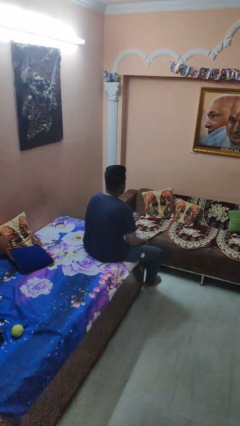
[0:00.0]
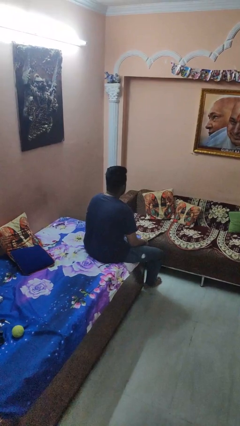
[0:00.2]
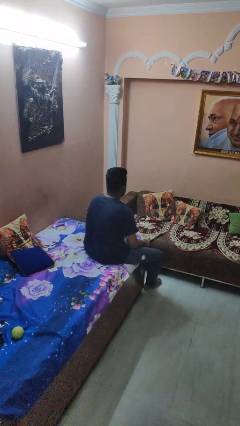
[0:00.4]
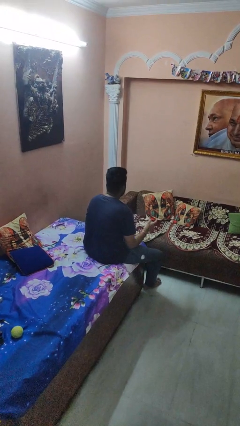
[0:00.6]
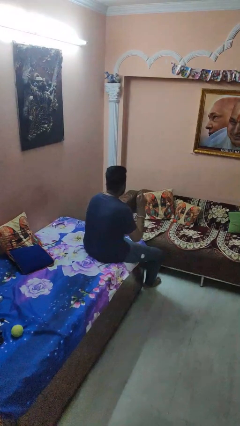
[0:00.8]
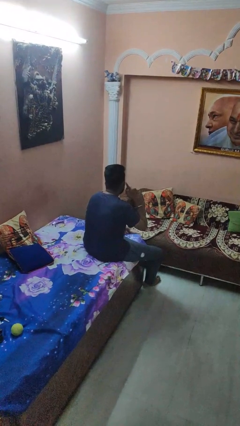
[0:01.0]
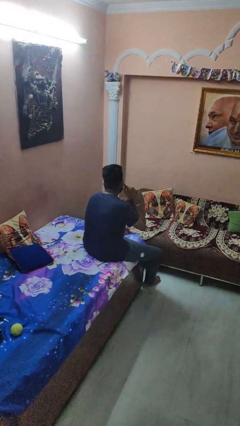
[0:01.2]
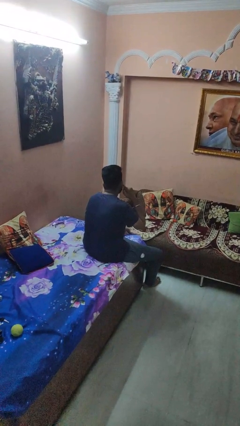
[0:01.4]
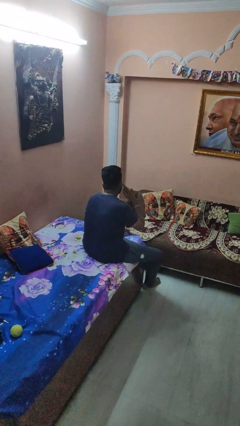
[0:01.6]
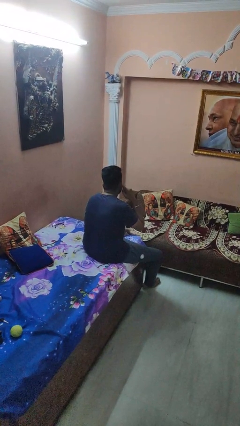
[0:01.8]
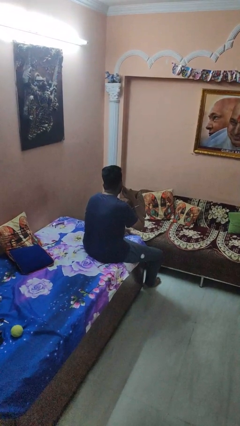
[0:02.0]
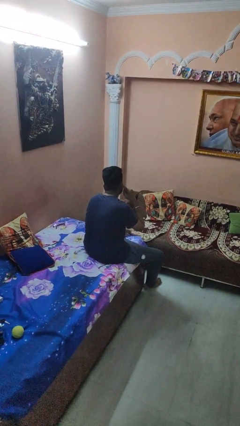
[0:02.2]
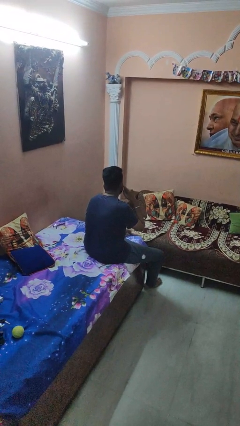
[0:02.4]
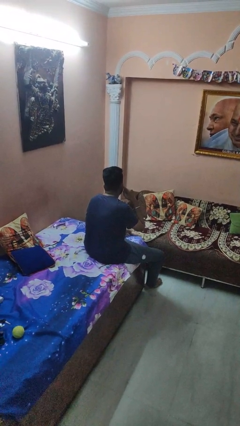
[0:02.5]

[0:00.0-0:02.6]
person gestures listen closely

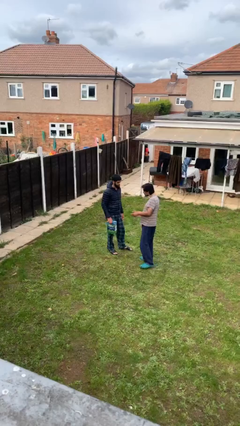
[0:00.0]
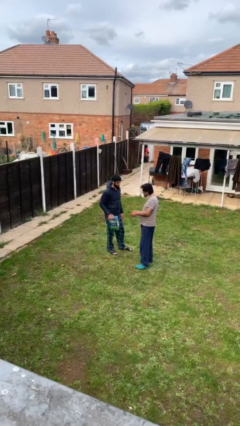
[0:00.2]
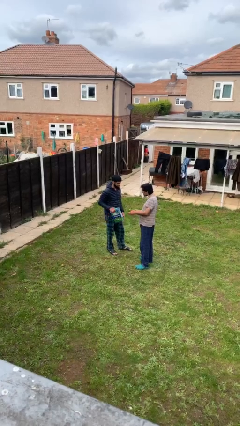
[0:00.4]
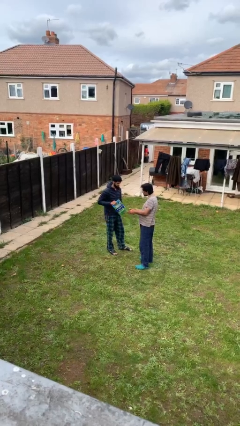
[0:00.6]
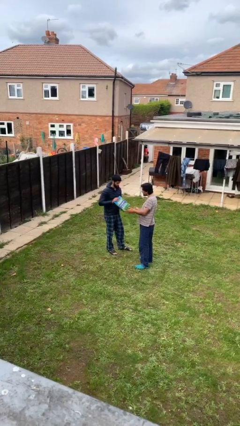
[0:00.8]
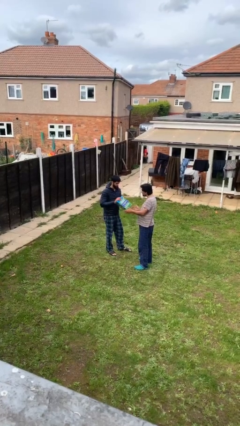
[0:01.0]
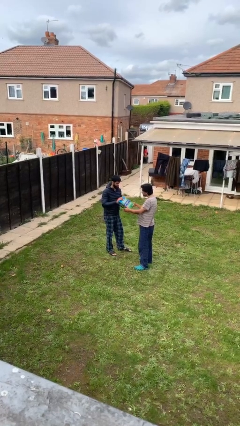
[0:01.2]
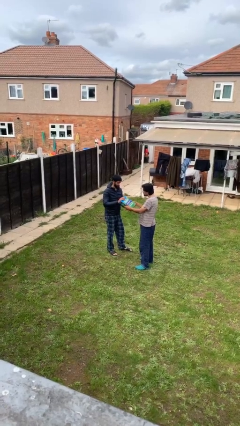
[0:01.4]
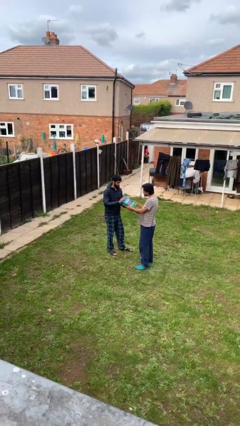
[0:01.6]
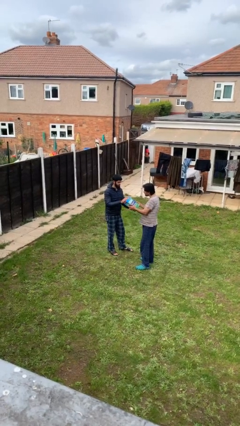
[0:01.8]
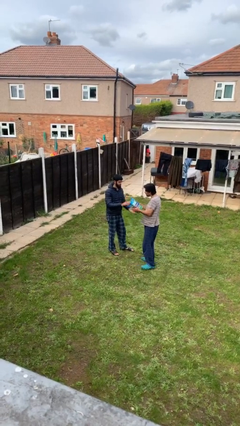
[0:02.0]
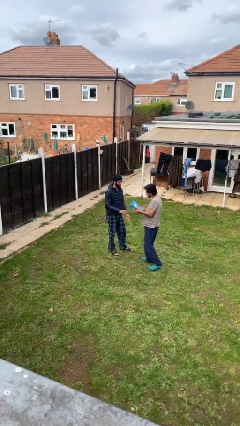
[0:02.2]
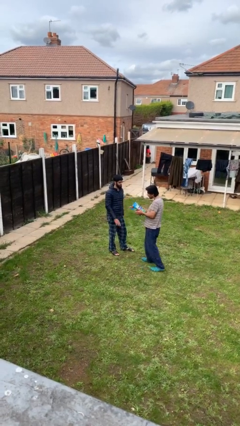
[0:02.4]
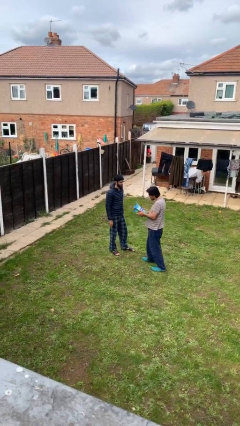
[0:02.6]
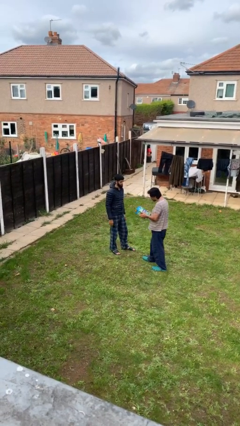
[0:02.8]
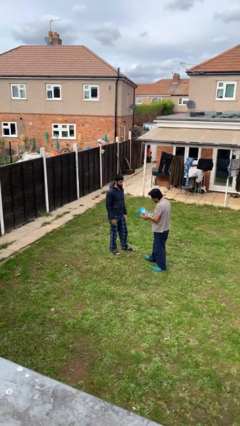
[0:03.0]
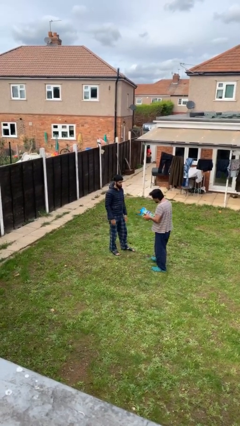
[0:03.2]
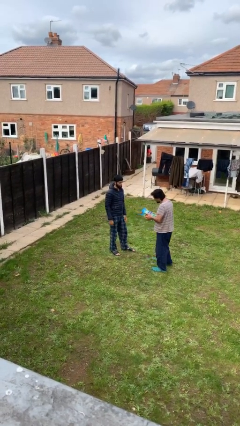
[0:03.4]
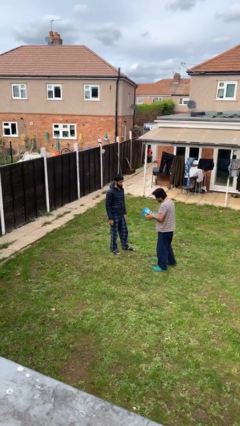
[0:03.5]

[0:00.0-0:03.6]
person transfers object to person

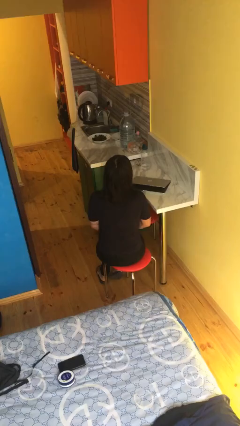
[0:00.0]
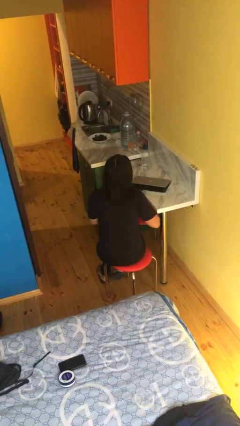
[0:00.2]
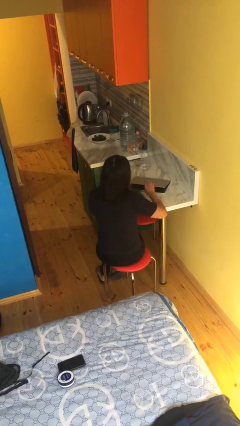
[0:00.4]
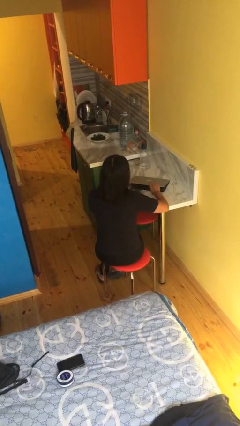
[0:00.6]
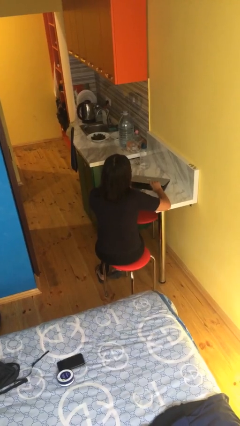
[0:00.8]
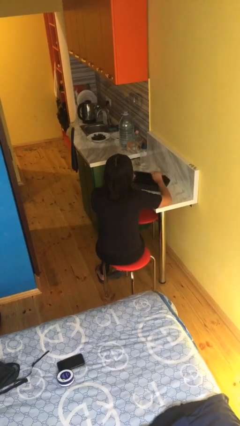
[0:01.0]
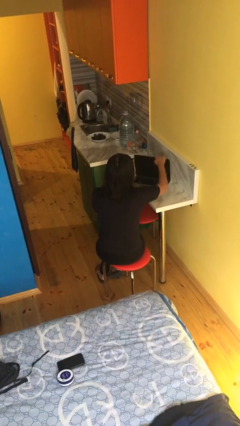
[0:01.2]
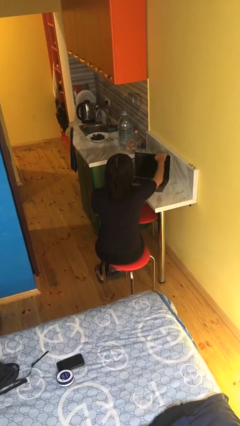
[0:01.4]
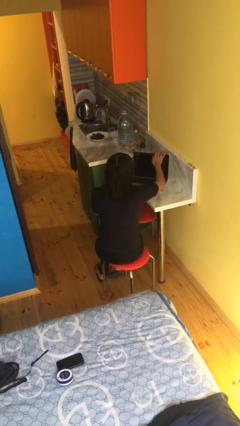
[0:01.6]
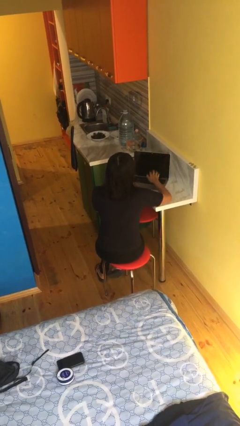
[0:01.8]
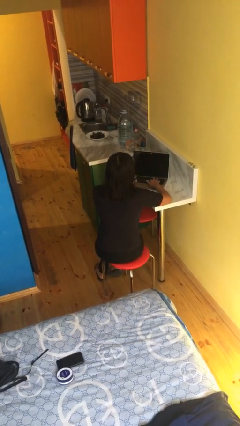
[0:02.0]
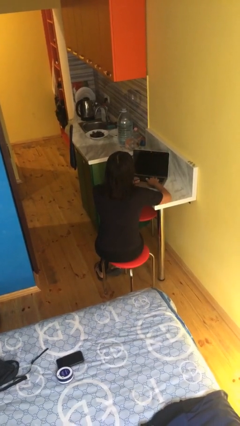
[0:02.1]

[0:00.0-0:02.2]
person opens laptop

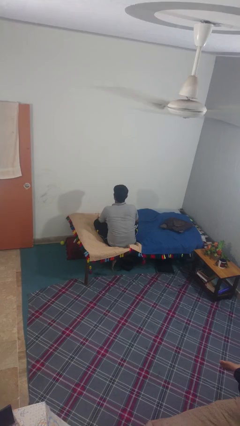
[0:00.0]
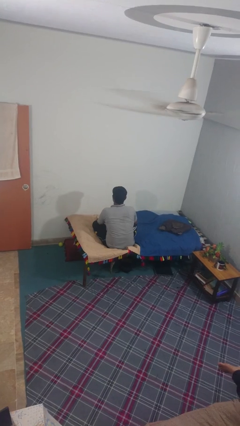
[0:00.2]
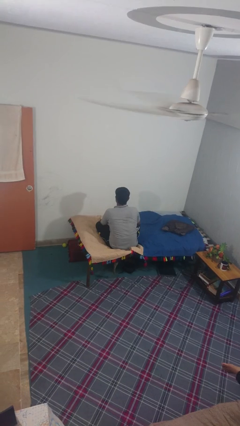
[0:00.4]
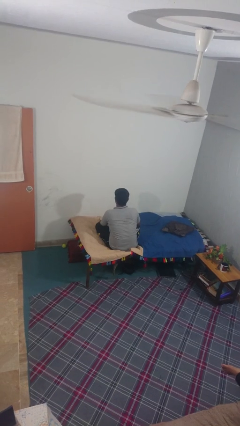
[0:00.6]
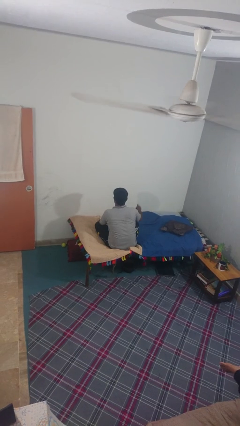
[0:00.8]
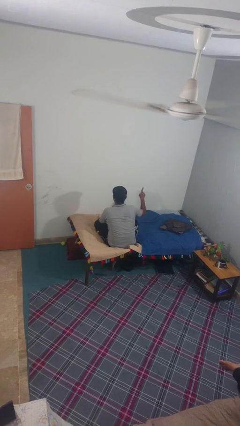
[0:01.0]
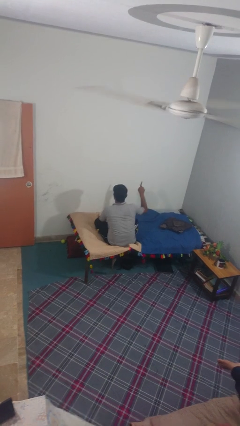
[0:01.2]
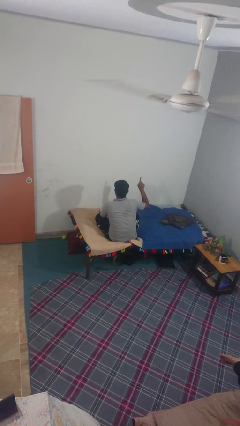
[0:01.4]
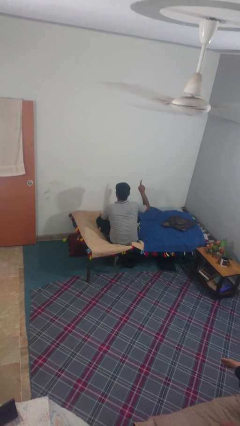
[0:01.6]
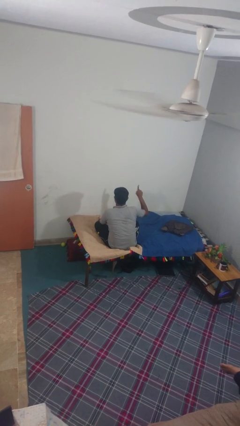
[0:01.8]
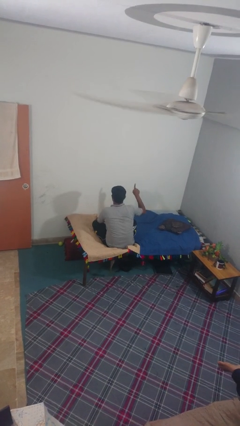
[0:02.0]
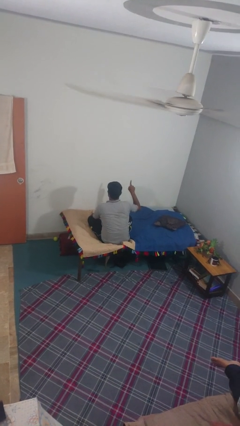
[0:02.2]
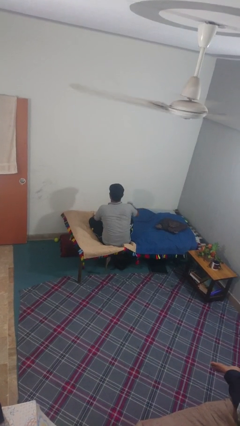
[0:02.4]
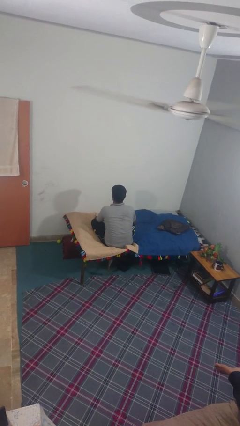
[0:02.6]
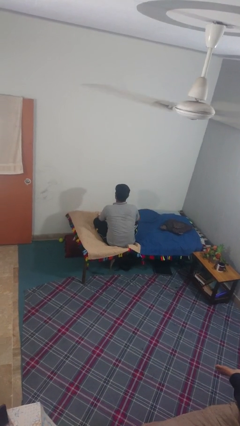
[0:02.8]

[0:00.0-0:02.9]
person gestures number one

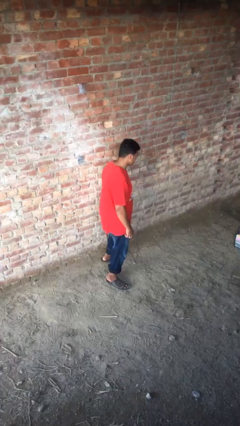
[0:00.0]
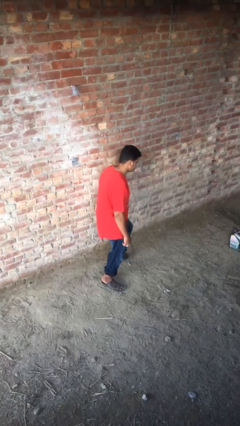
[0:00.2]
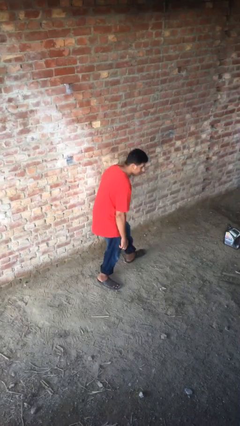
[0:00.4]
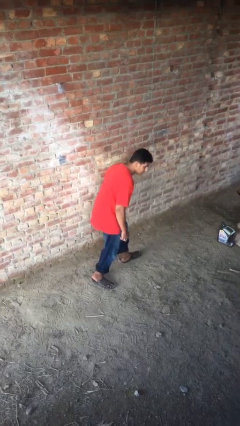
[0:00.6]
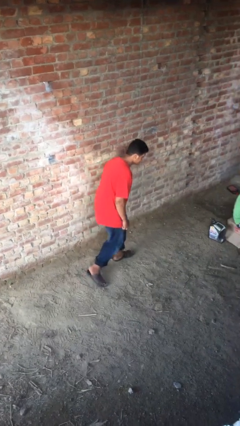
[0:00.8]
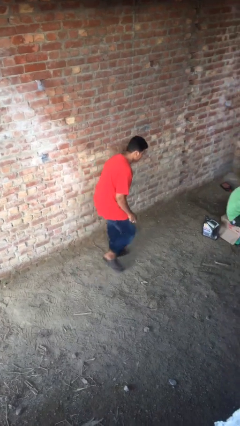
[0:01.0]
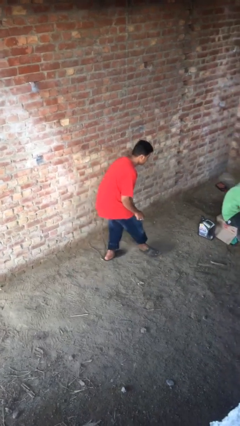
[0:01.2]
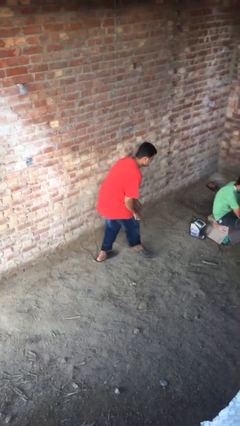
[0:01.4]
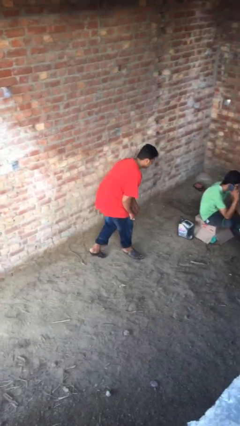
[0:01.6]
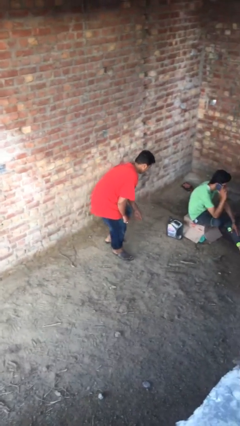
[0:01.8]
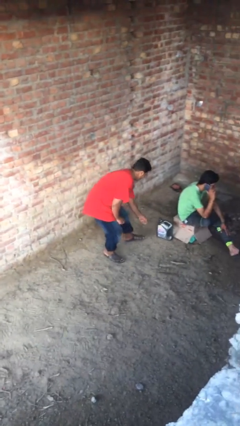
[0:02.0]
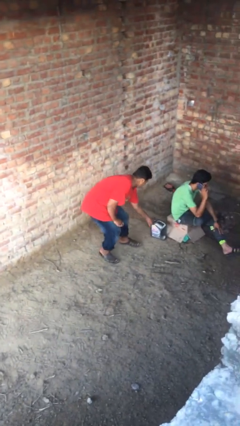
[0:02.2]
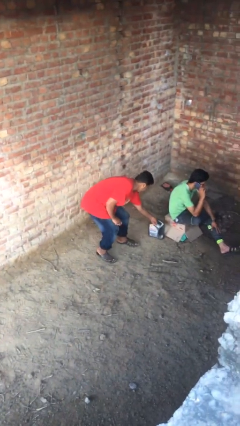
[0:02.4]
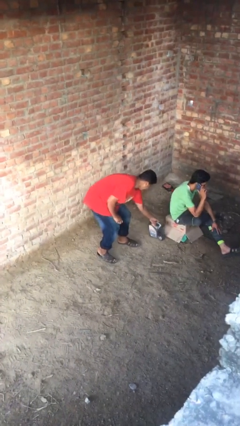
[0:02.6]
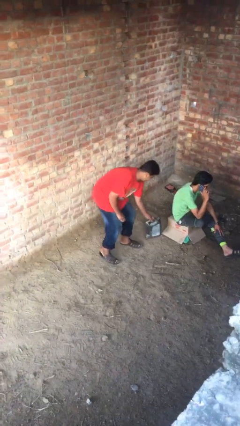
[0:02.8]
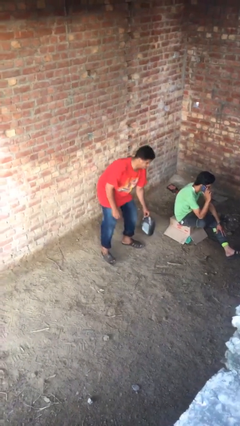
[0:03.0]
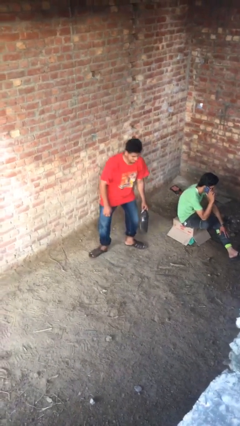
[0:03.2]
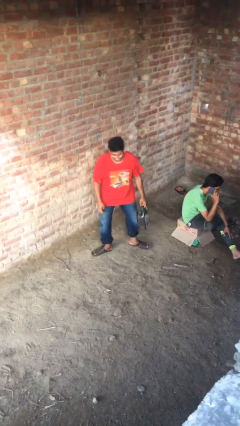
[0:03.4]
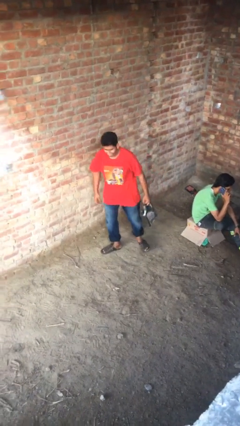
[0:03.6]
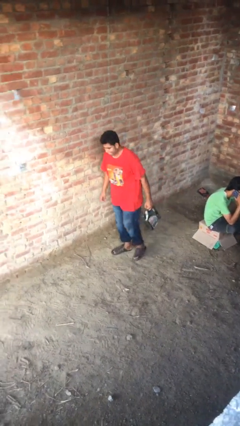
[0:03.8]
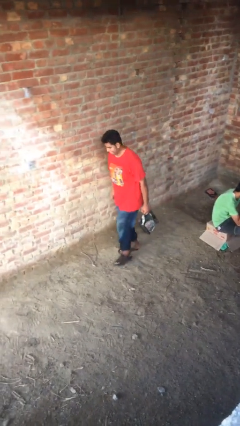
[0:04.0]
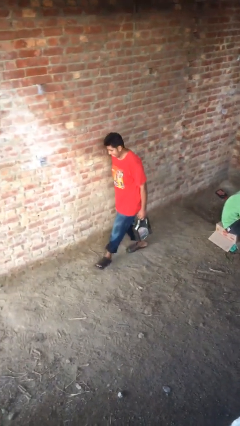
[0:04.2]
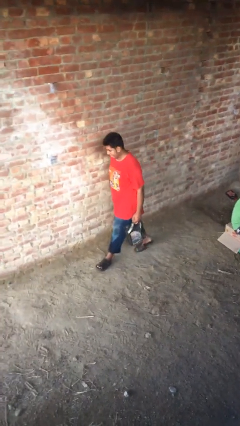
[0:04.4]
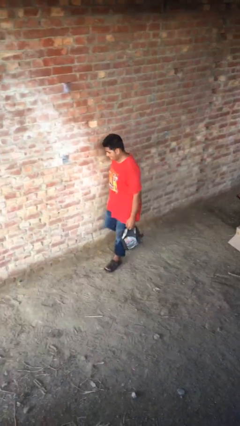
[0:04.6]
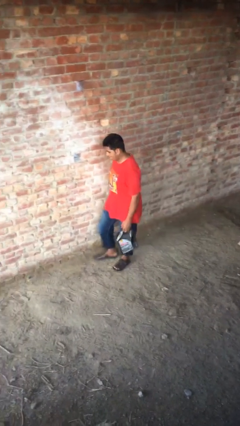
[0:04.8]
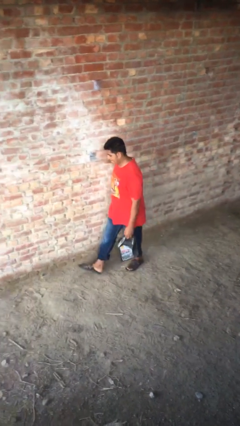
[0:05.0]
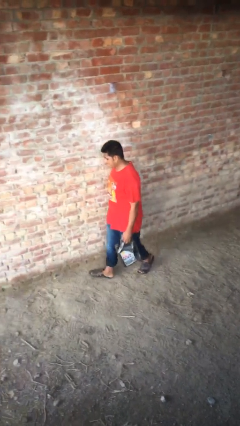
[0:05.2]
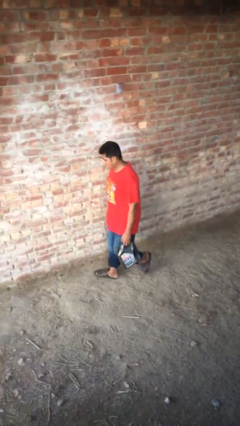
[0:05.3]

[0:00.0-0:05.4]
person steals object from person

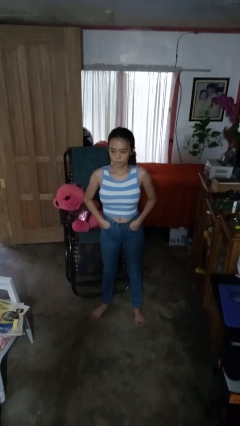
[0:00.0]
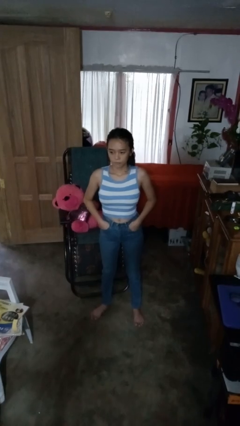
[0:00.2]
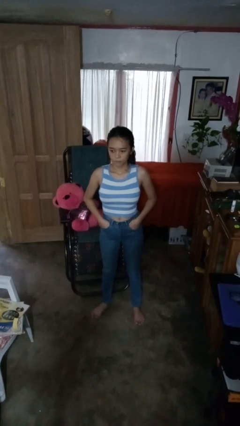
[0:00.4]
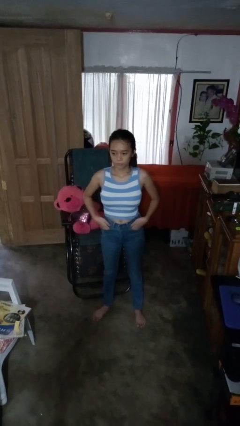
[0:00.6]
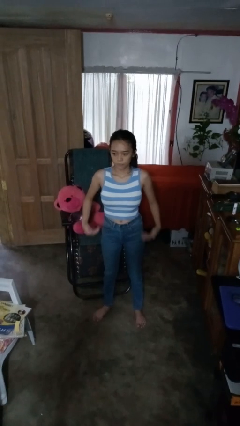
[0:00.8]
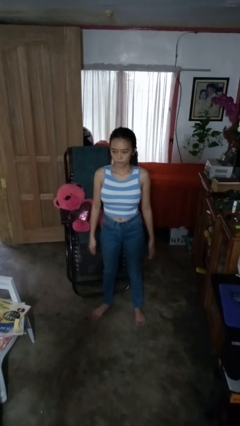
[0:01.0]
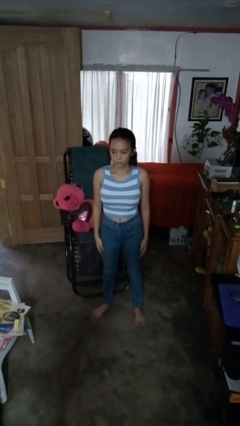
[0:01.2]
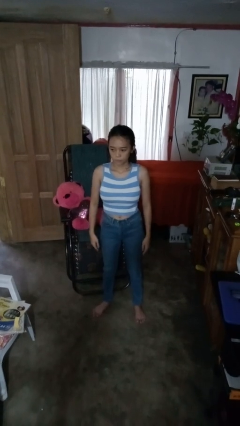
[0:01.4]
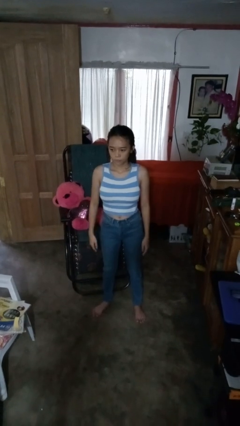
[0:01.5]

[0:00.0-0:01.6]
person puts hands in back pockets
